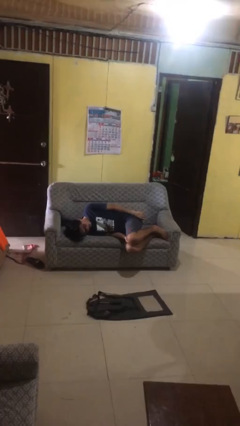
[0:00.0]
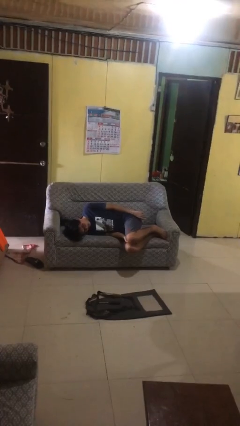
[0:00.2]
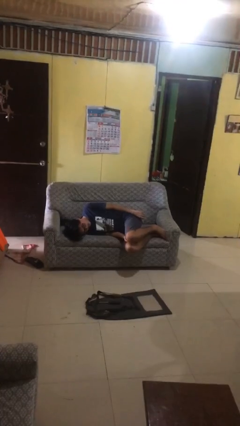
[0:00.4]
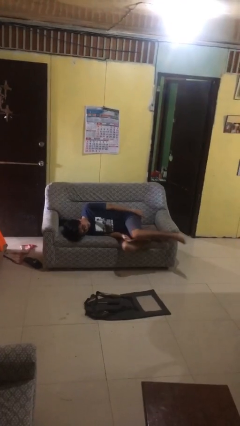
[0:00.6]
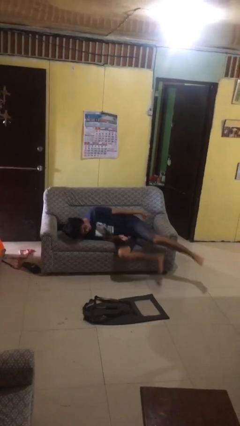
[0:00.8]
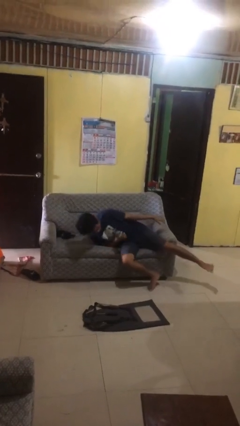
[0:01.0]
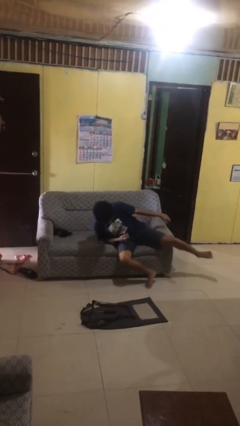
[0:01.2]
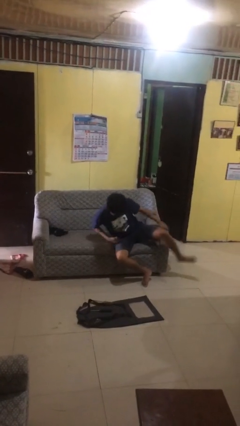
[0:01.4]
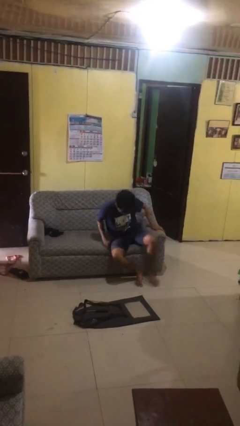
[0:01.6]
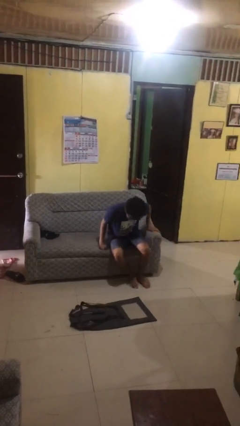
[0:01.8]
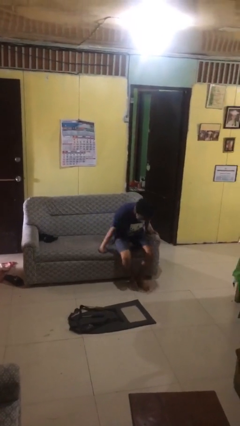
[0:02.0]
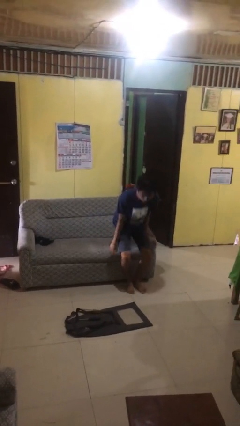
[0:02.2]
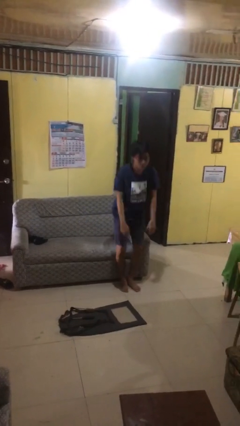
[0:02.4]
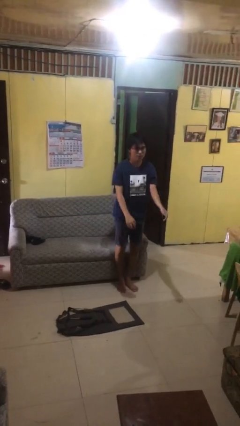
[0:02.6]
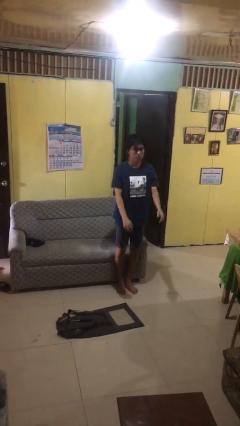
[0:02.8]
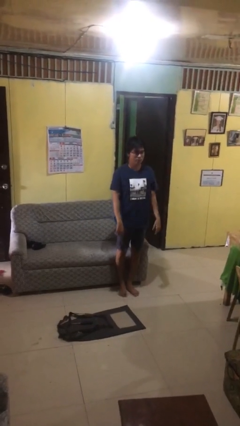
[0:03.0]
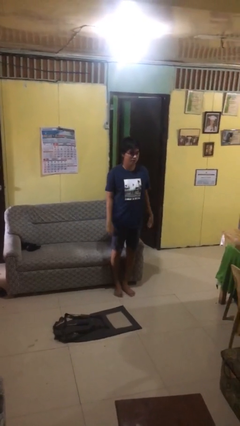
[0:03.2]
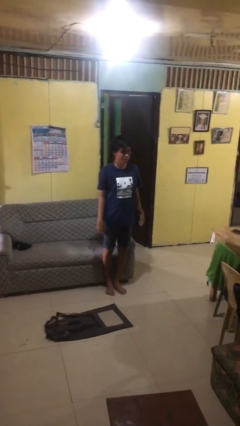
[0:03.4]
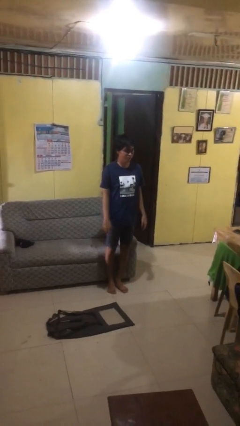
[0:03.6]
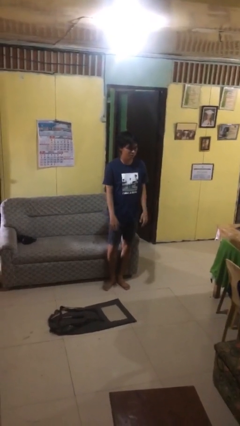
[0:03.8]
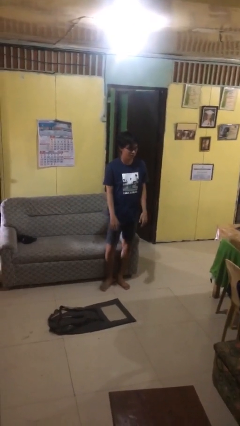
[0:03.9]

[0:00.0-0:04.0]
person stands up

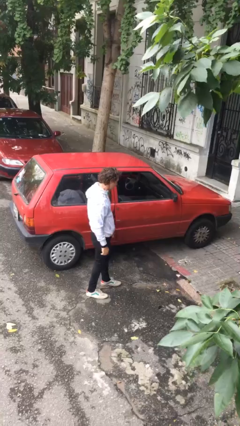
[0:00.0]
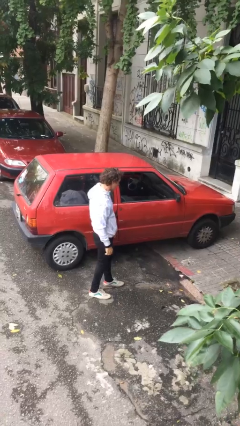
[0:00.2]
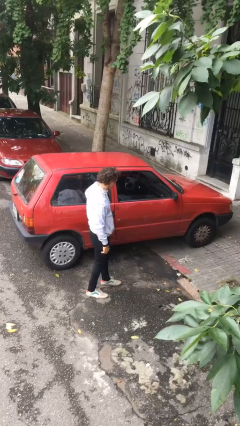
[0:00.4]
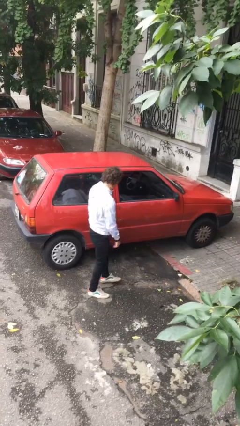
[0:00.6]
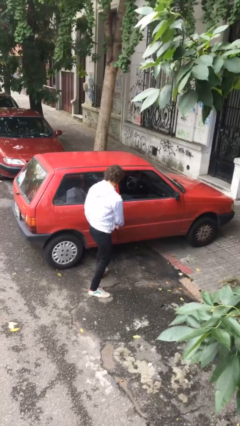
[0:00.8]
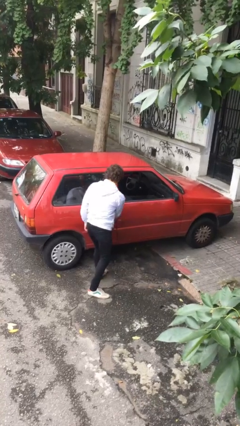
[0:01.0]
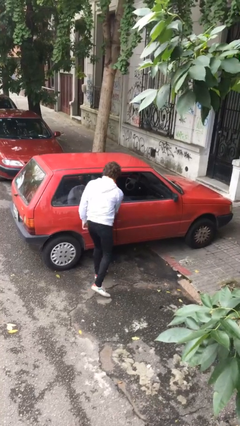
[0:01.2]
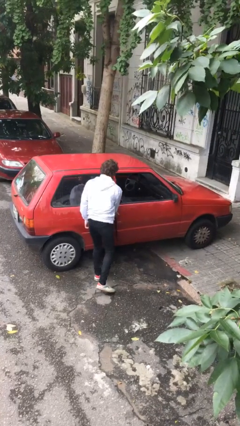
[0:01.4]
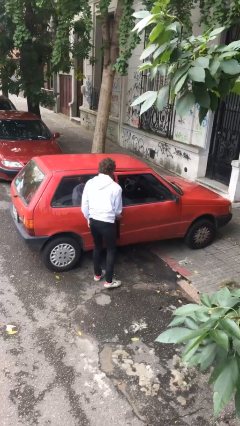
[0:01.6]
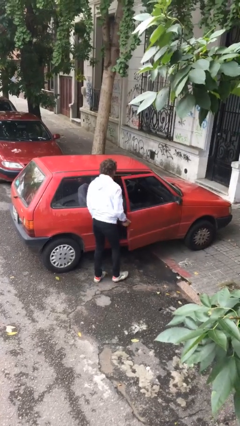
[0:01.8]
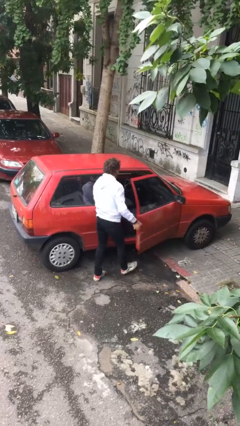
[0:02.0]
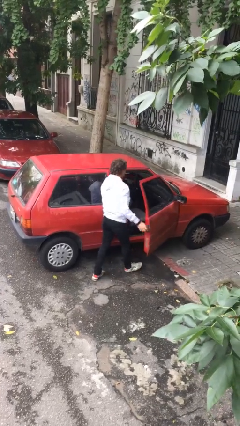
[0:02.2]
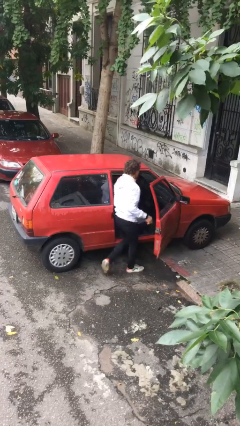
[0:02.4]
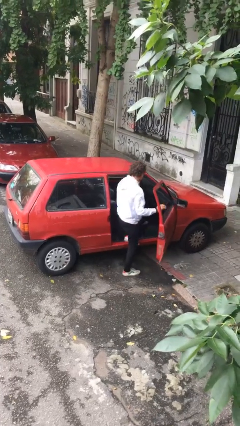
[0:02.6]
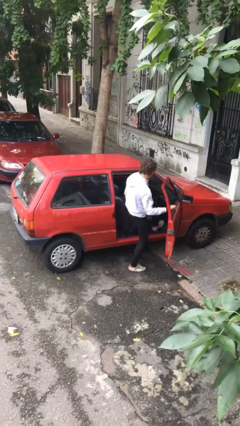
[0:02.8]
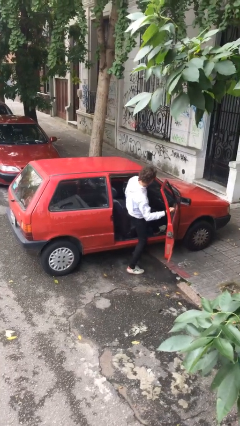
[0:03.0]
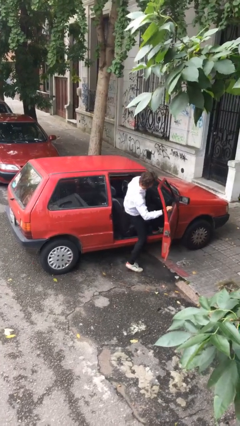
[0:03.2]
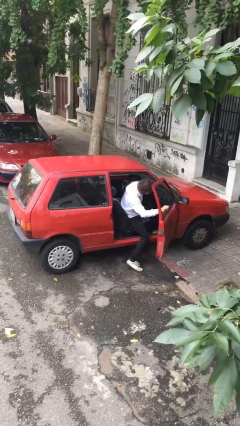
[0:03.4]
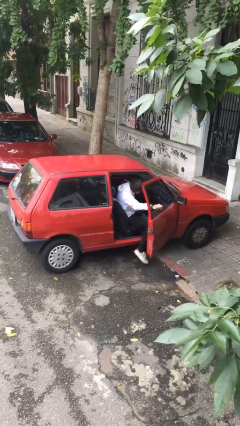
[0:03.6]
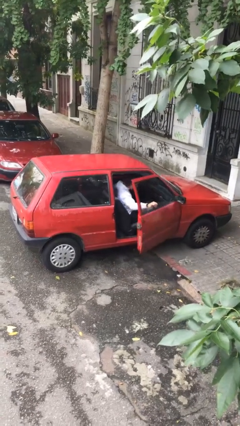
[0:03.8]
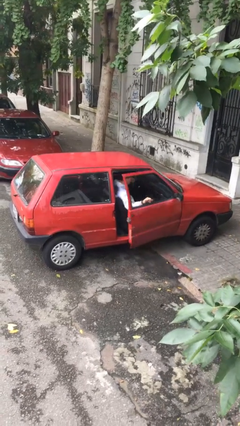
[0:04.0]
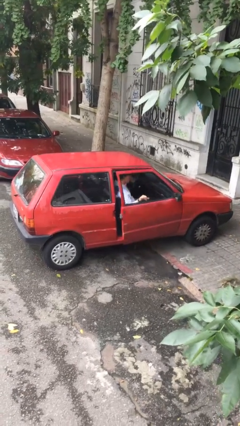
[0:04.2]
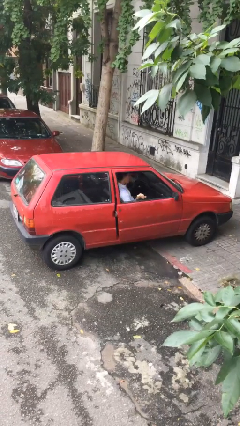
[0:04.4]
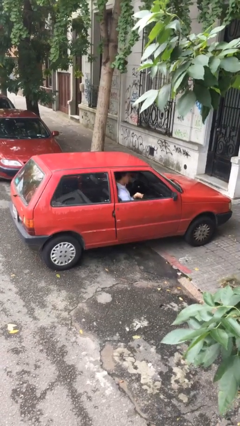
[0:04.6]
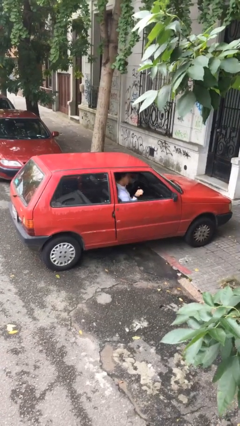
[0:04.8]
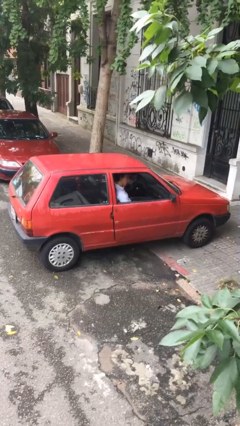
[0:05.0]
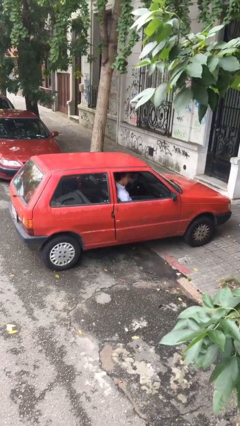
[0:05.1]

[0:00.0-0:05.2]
car picks up person

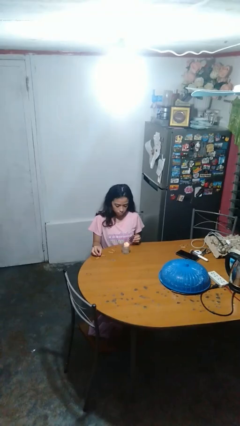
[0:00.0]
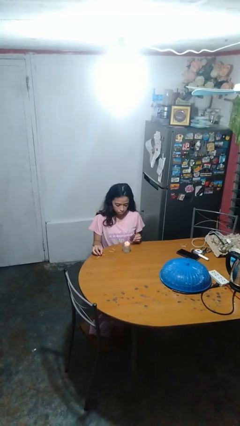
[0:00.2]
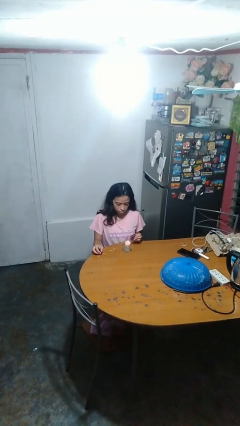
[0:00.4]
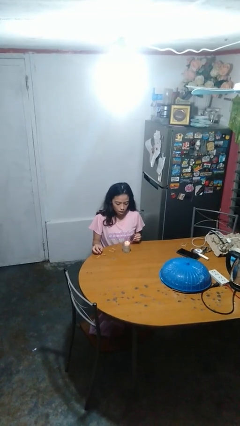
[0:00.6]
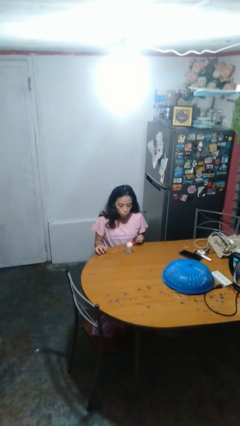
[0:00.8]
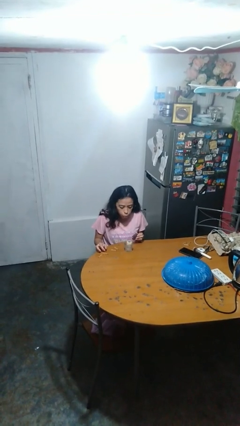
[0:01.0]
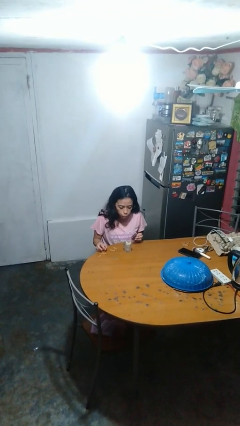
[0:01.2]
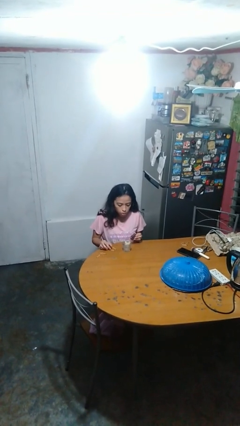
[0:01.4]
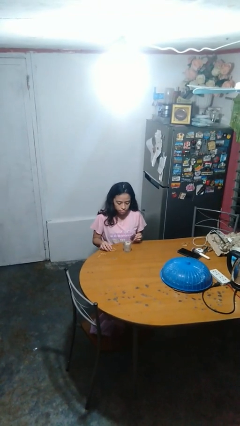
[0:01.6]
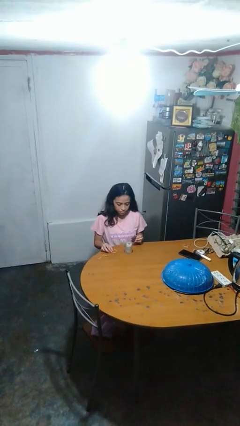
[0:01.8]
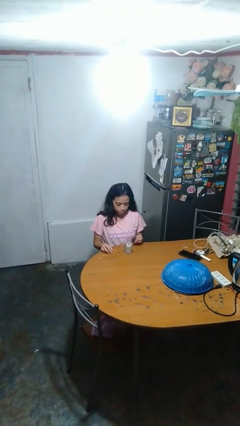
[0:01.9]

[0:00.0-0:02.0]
person extinguishes candle

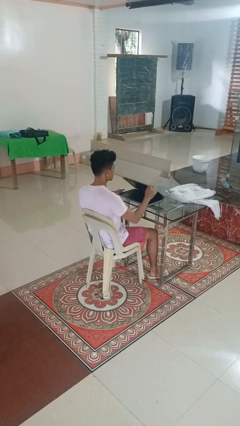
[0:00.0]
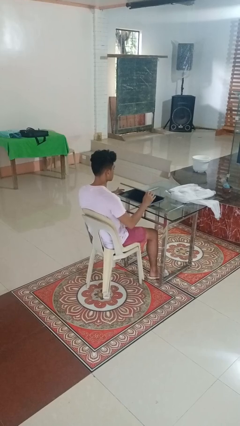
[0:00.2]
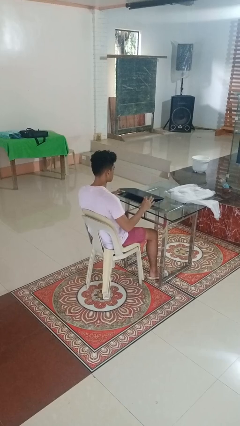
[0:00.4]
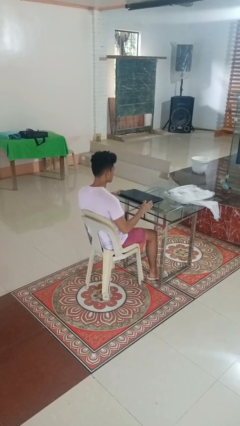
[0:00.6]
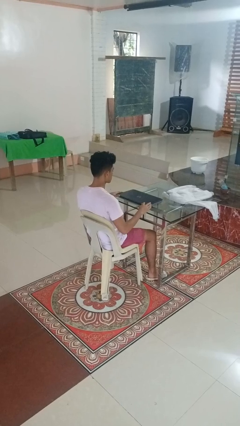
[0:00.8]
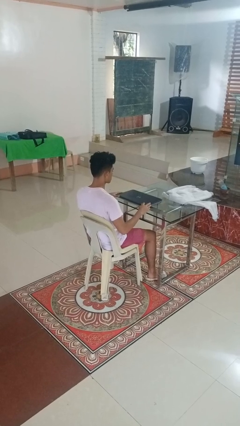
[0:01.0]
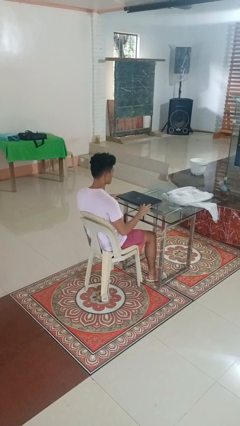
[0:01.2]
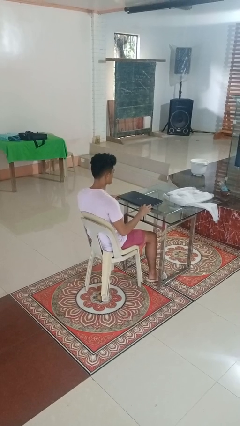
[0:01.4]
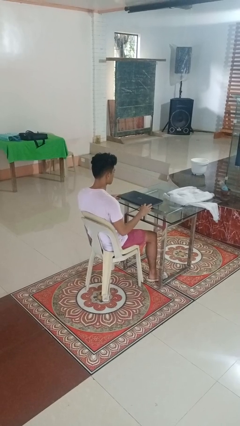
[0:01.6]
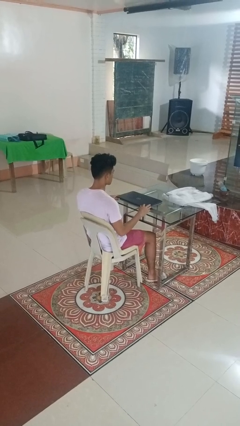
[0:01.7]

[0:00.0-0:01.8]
person closes laptop

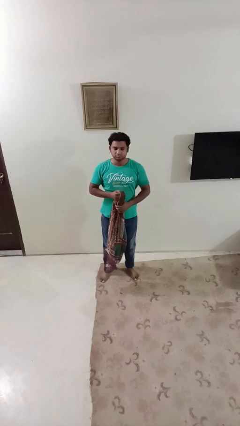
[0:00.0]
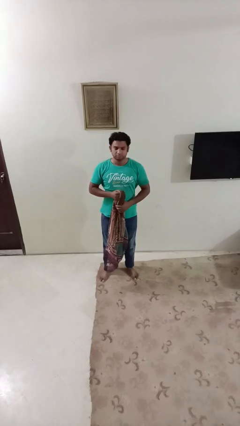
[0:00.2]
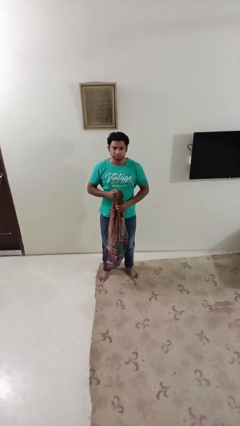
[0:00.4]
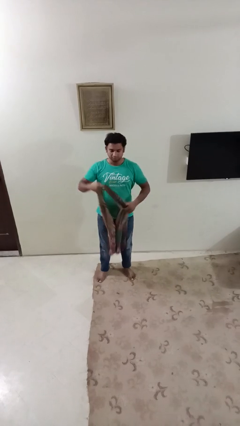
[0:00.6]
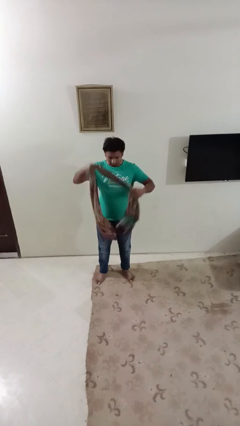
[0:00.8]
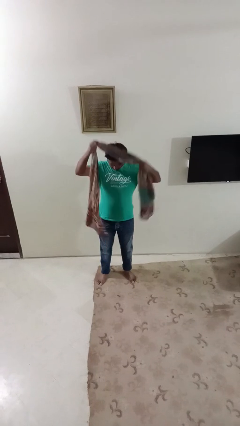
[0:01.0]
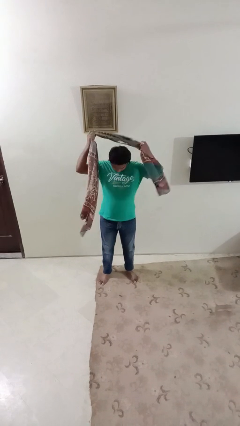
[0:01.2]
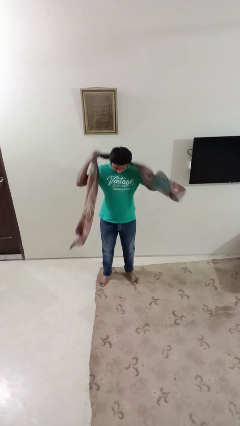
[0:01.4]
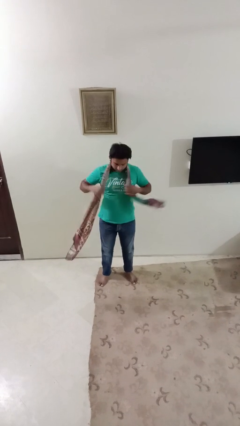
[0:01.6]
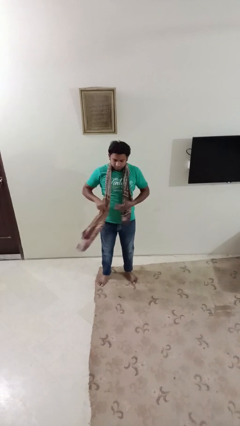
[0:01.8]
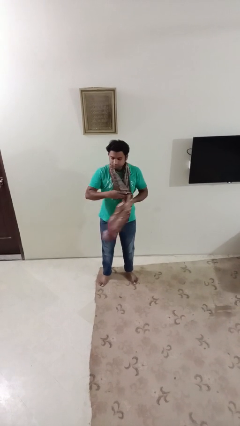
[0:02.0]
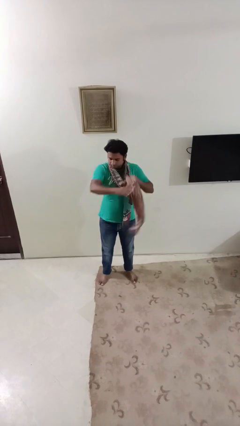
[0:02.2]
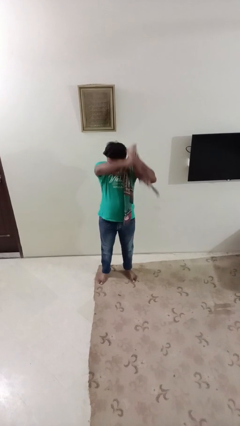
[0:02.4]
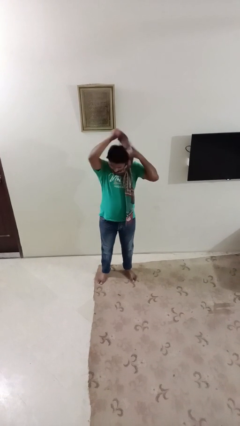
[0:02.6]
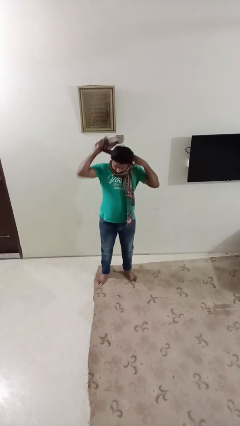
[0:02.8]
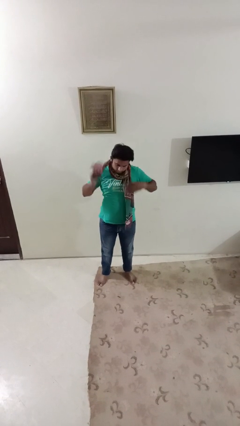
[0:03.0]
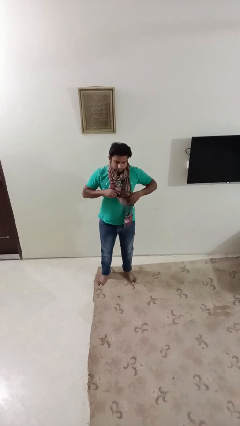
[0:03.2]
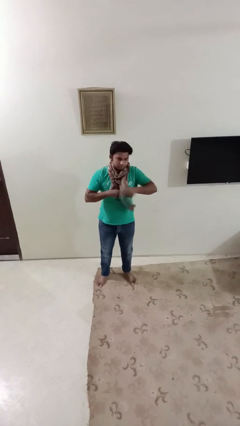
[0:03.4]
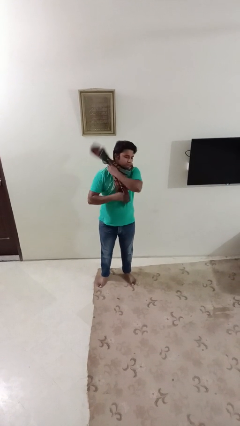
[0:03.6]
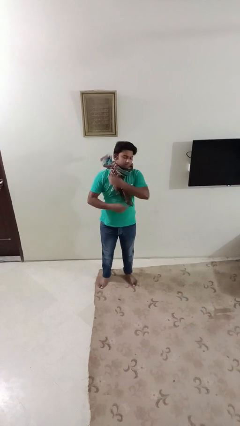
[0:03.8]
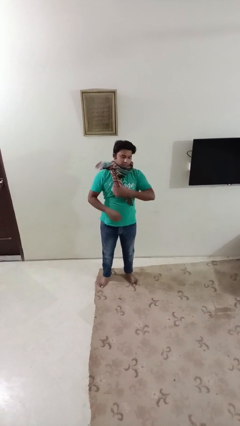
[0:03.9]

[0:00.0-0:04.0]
person puts on scarf
